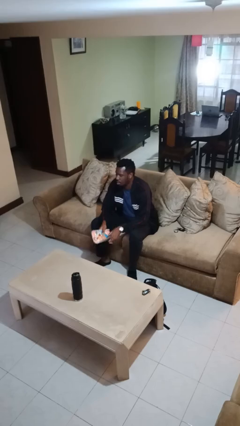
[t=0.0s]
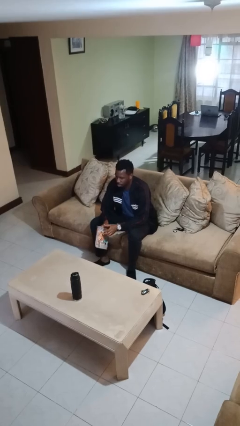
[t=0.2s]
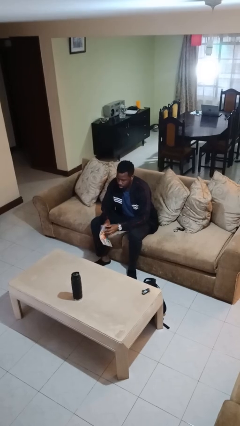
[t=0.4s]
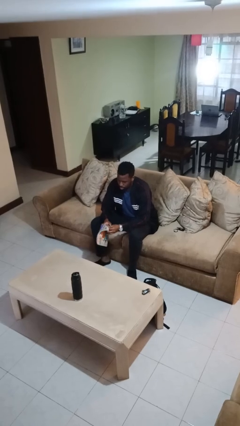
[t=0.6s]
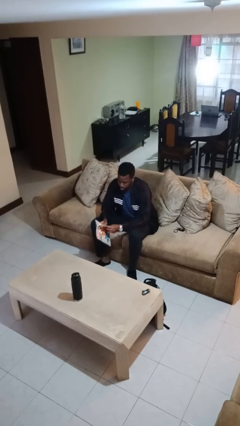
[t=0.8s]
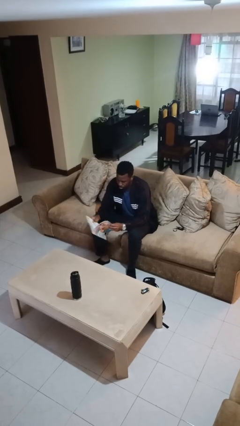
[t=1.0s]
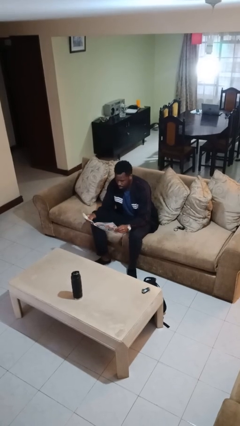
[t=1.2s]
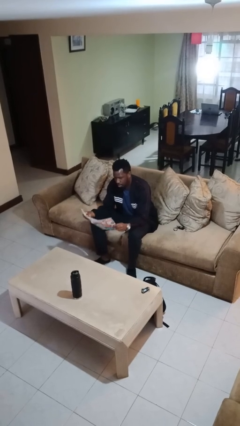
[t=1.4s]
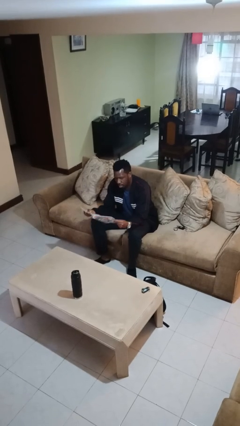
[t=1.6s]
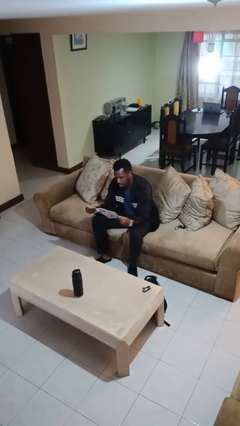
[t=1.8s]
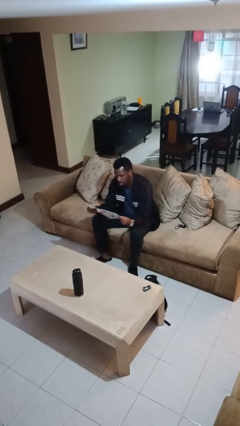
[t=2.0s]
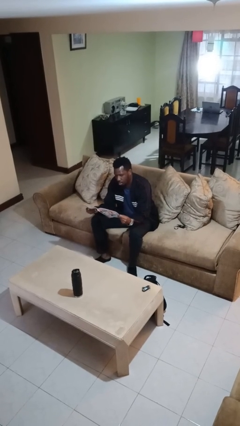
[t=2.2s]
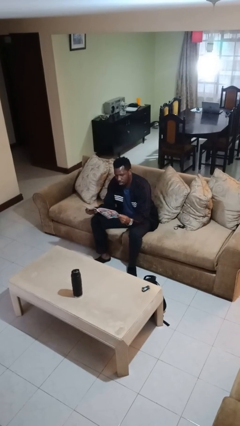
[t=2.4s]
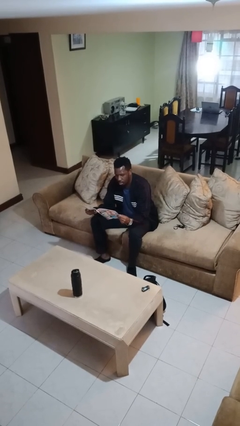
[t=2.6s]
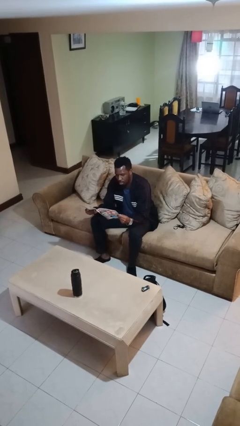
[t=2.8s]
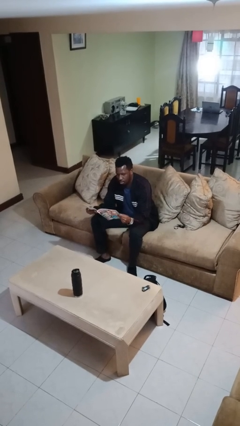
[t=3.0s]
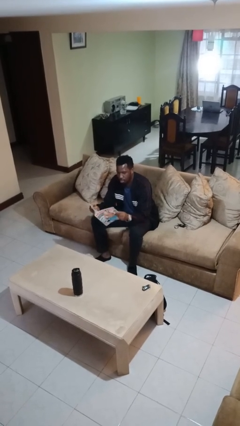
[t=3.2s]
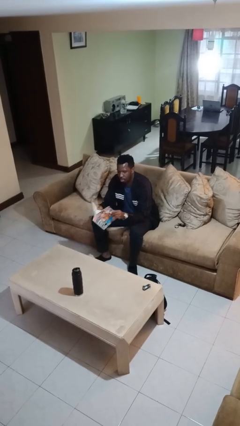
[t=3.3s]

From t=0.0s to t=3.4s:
person reads magazine

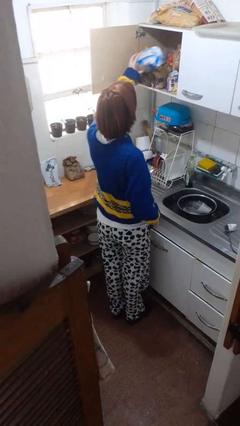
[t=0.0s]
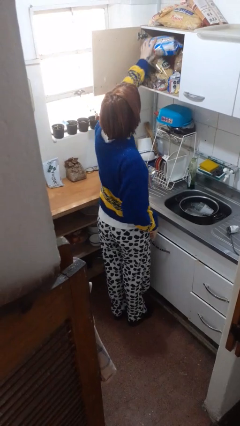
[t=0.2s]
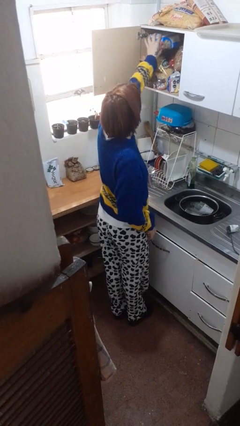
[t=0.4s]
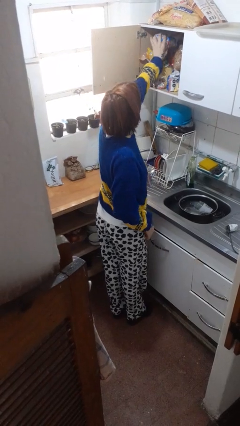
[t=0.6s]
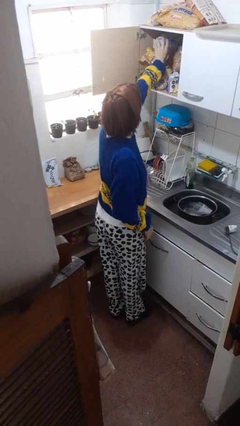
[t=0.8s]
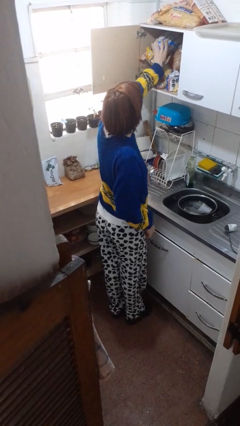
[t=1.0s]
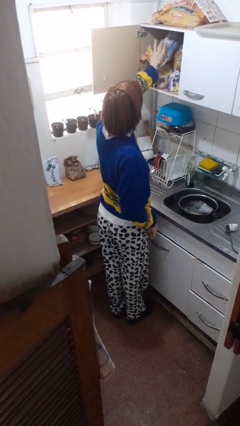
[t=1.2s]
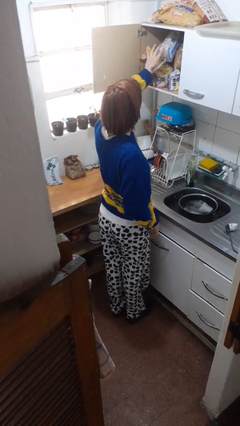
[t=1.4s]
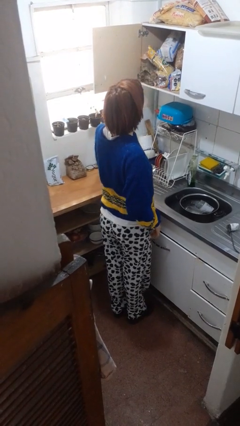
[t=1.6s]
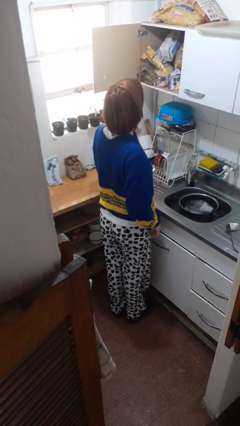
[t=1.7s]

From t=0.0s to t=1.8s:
person puts object in cabinet

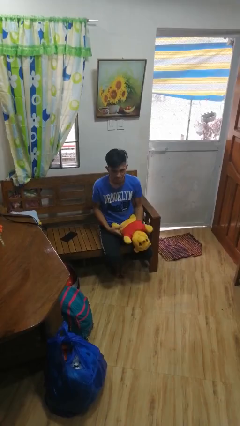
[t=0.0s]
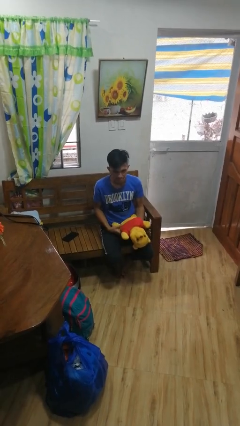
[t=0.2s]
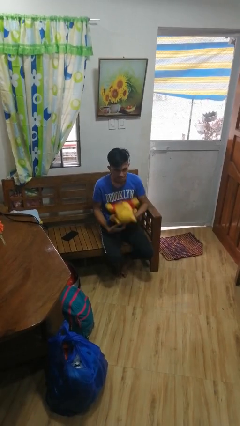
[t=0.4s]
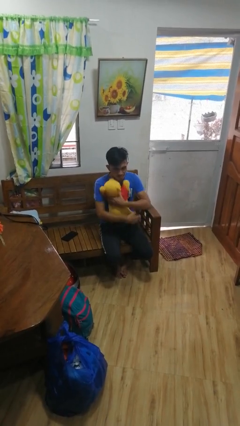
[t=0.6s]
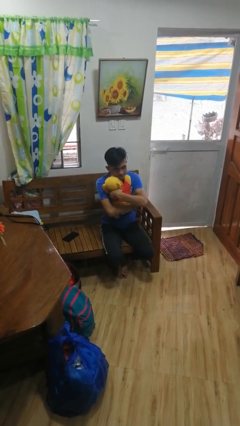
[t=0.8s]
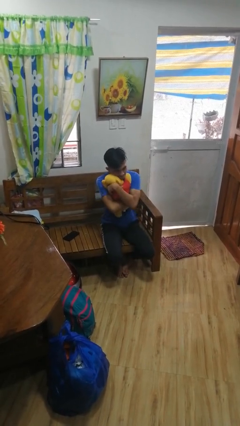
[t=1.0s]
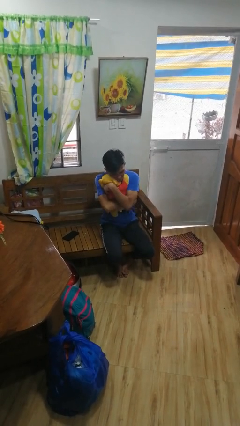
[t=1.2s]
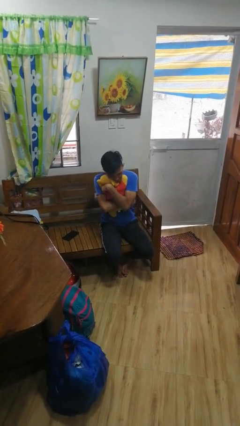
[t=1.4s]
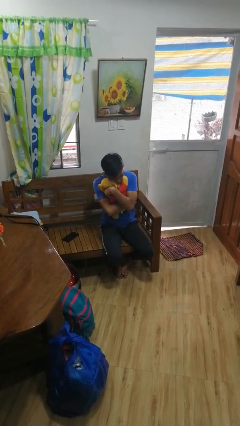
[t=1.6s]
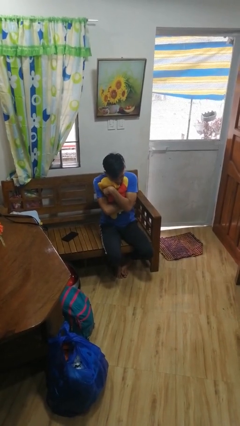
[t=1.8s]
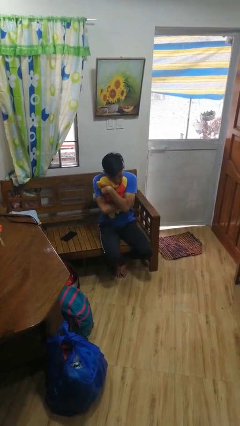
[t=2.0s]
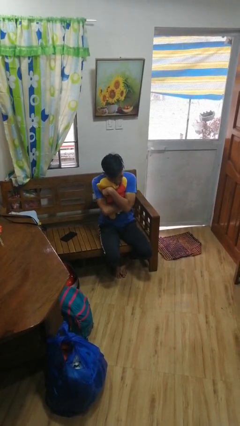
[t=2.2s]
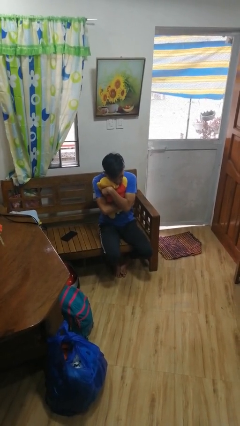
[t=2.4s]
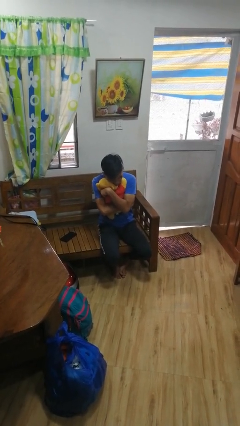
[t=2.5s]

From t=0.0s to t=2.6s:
person hugs stuffed animal

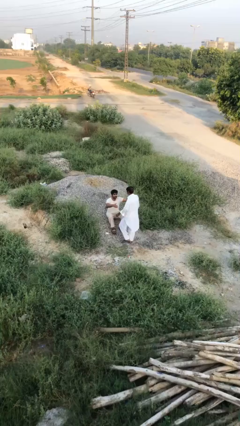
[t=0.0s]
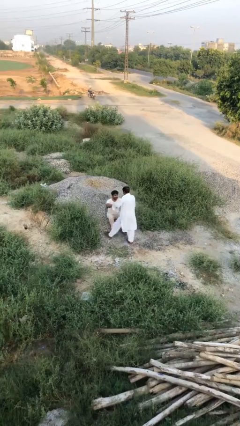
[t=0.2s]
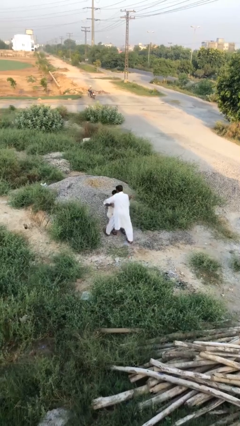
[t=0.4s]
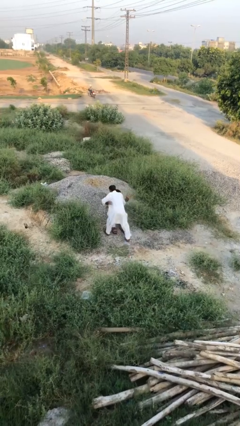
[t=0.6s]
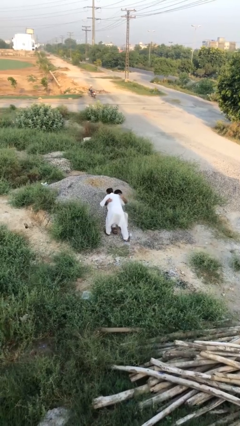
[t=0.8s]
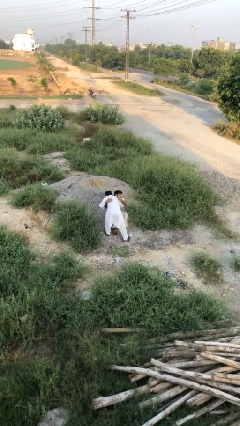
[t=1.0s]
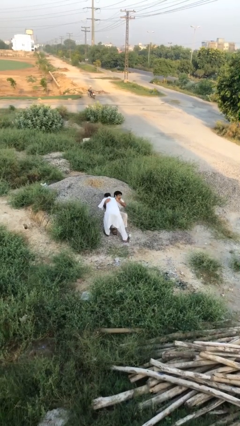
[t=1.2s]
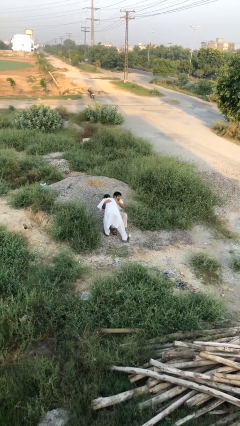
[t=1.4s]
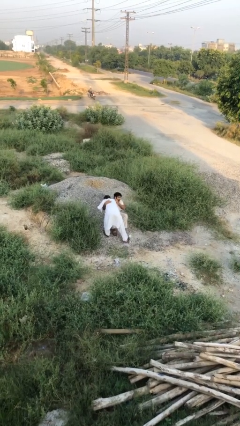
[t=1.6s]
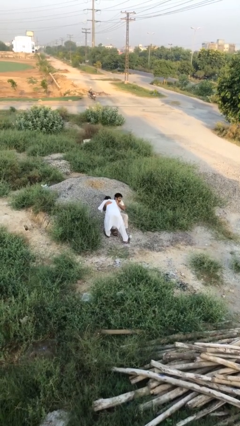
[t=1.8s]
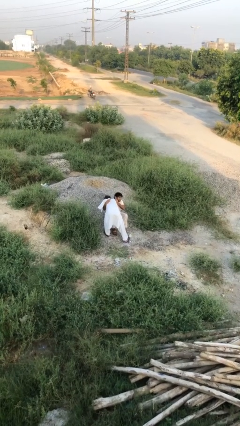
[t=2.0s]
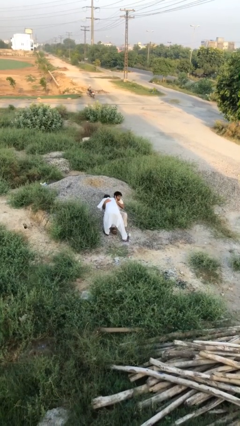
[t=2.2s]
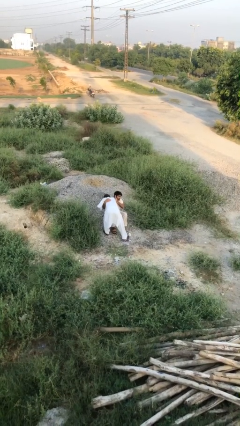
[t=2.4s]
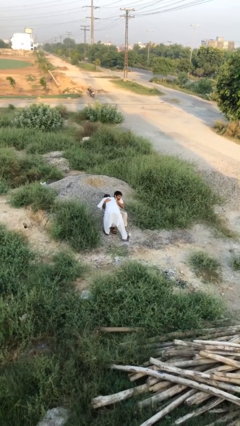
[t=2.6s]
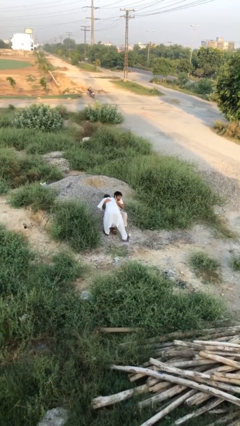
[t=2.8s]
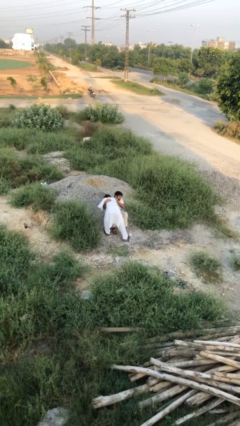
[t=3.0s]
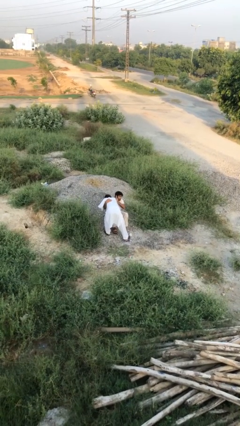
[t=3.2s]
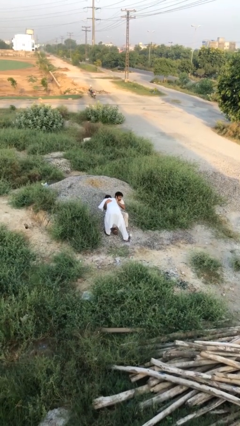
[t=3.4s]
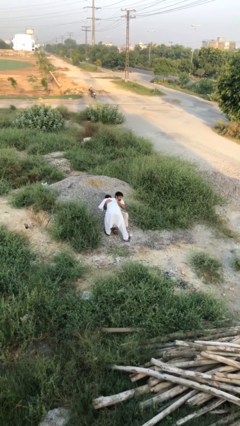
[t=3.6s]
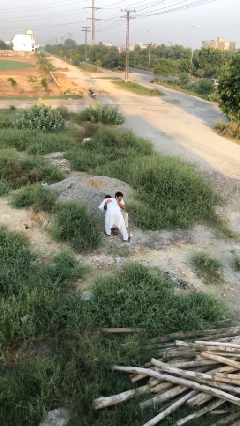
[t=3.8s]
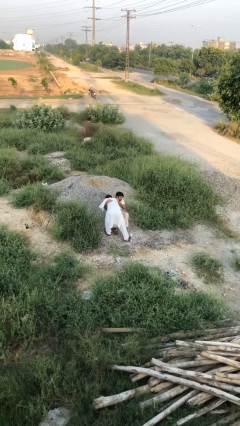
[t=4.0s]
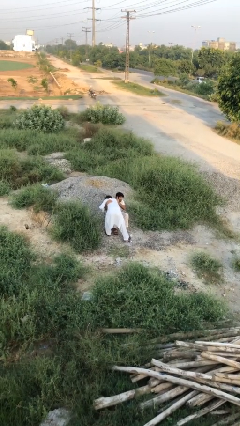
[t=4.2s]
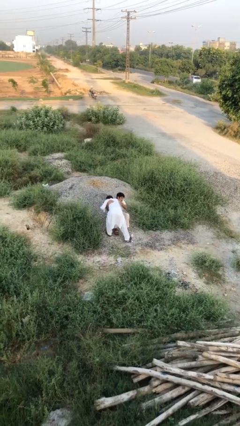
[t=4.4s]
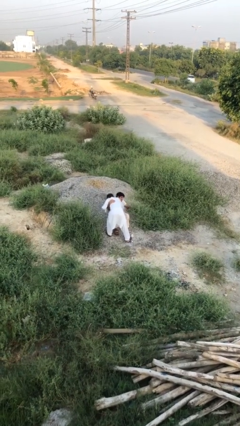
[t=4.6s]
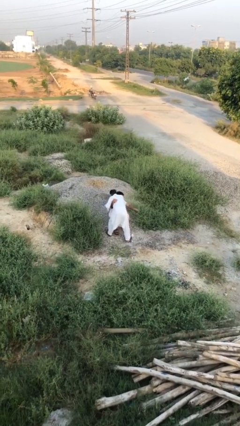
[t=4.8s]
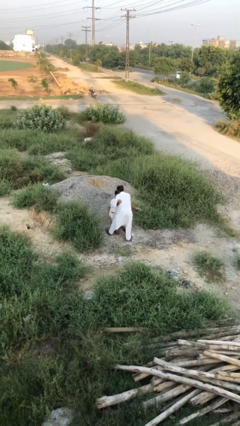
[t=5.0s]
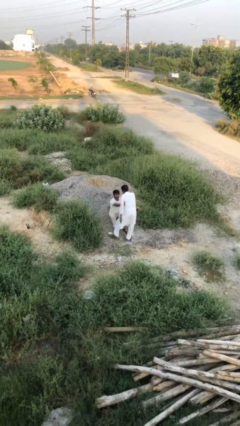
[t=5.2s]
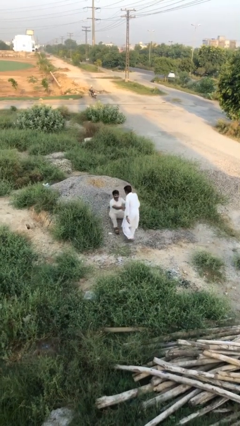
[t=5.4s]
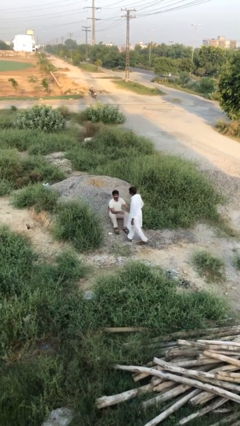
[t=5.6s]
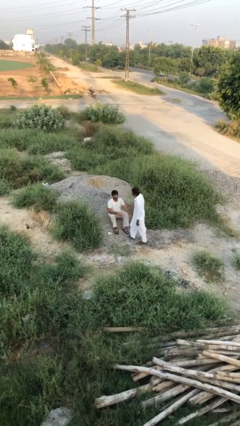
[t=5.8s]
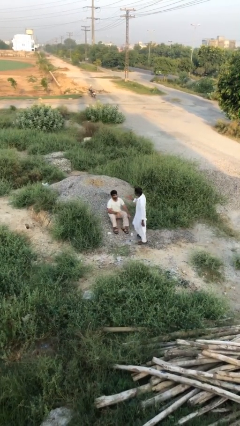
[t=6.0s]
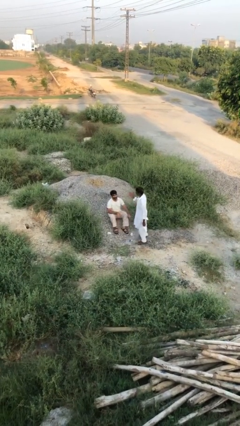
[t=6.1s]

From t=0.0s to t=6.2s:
person embraces person

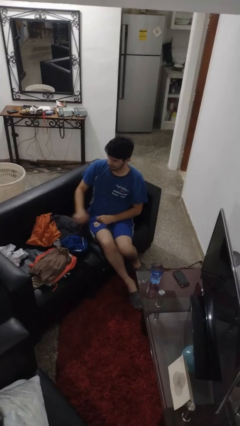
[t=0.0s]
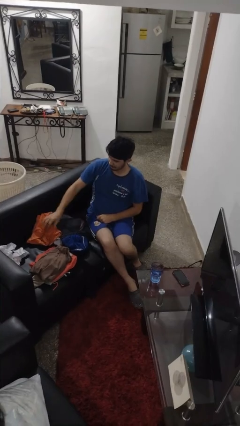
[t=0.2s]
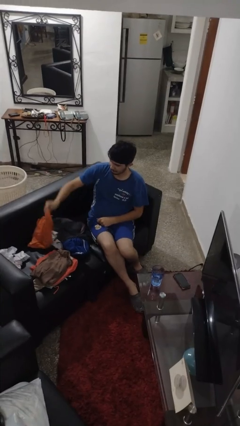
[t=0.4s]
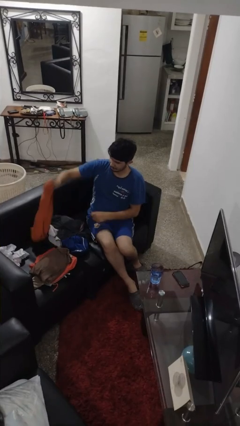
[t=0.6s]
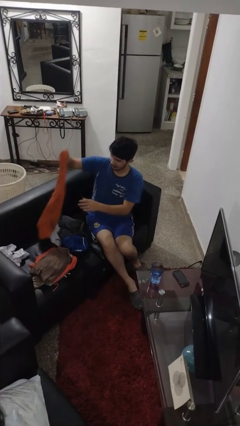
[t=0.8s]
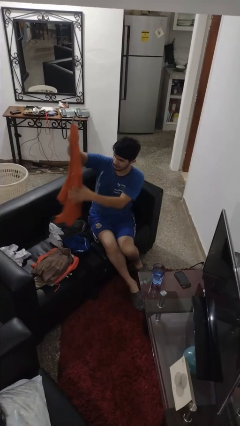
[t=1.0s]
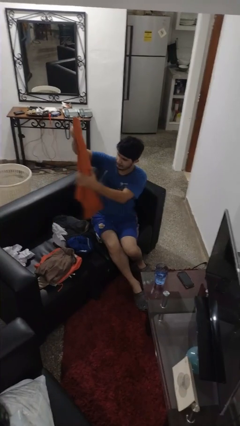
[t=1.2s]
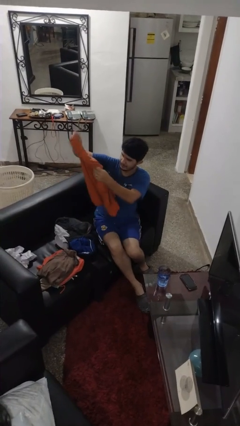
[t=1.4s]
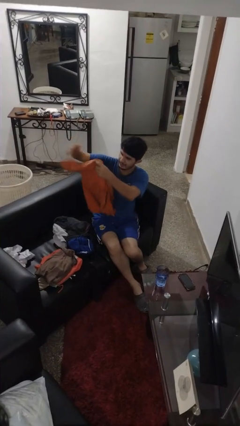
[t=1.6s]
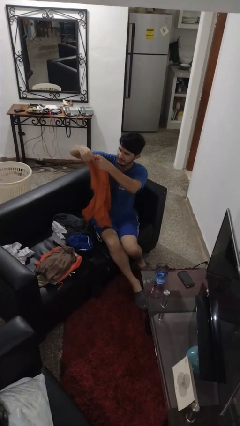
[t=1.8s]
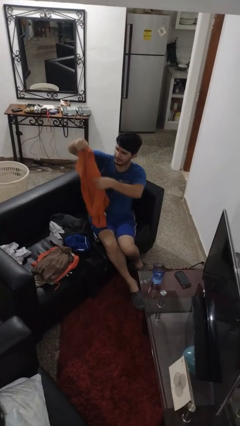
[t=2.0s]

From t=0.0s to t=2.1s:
person folds shirt

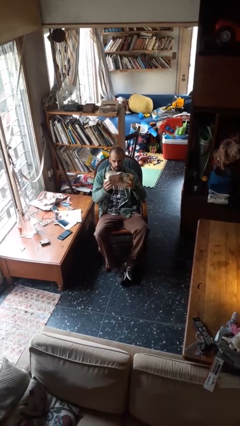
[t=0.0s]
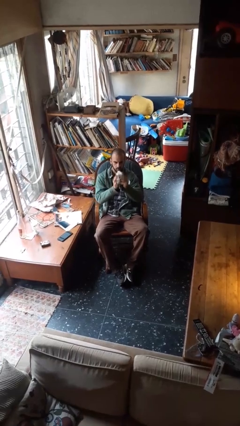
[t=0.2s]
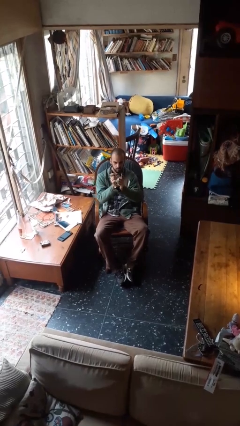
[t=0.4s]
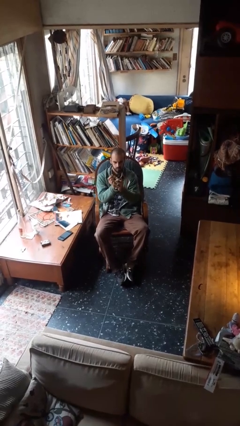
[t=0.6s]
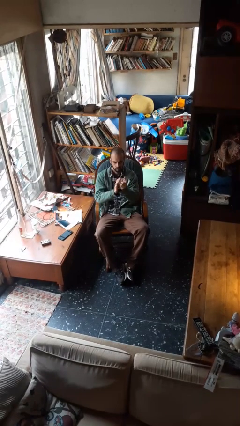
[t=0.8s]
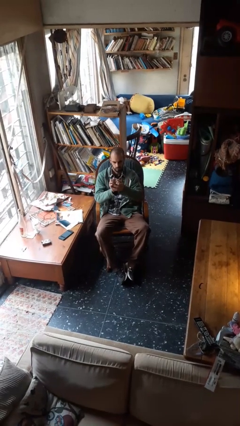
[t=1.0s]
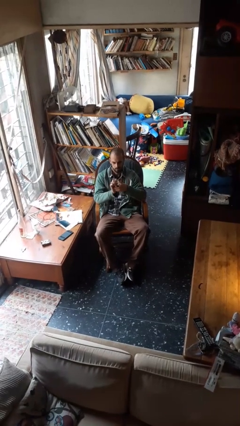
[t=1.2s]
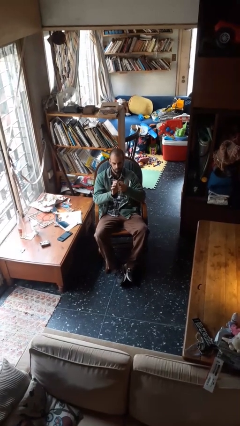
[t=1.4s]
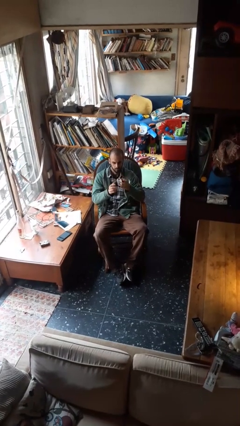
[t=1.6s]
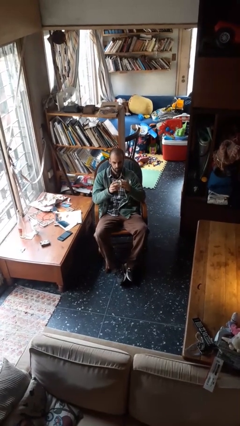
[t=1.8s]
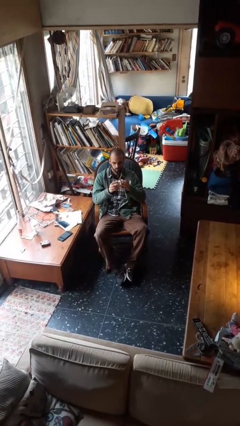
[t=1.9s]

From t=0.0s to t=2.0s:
person crumples paper
